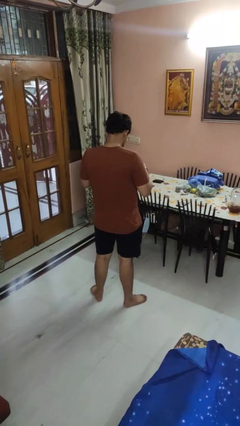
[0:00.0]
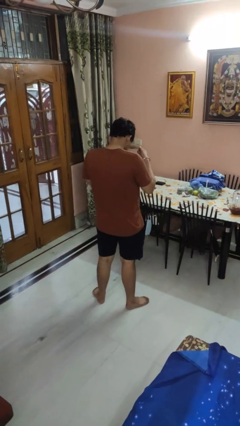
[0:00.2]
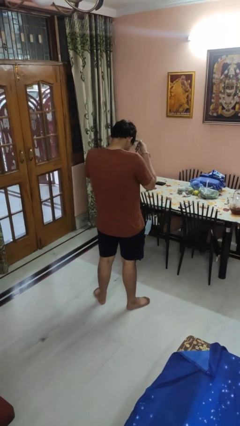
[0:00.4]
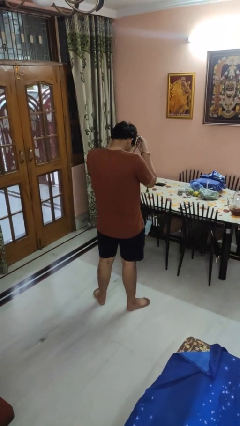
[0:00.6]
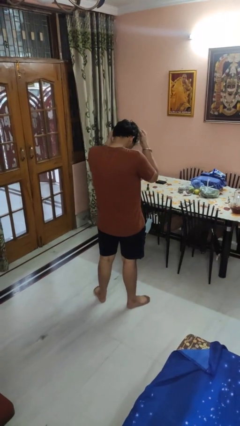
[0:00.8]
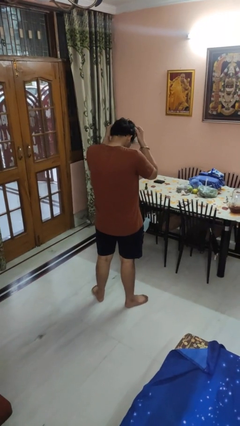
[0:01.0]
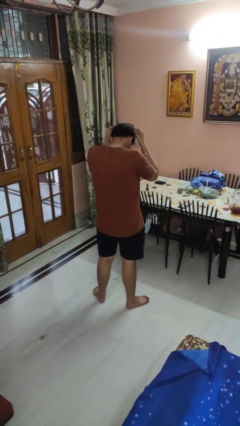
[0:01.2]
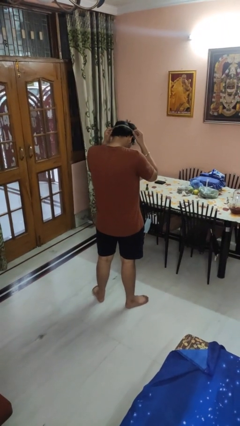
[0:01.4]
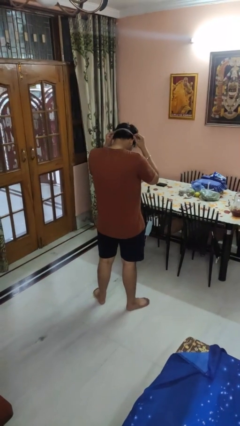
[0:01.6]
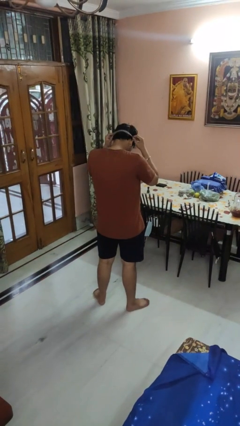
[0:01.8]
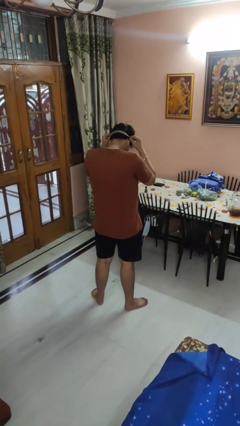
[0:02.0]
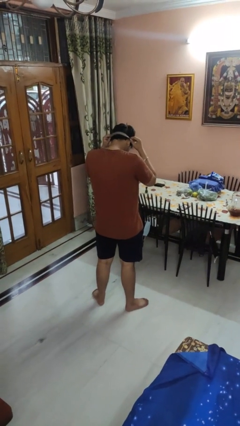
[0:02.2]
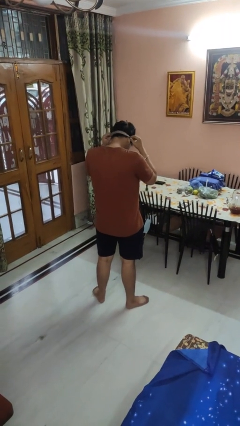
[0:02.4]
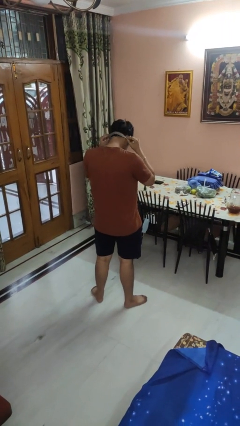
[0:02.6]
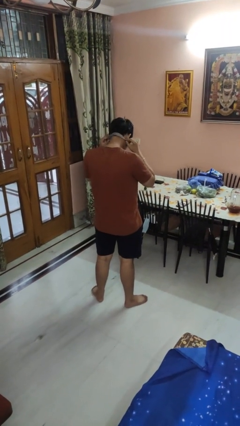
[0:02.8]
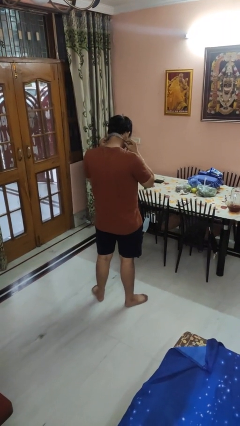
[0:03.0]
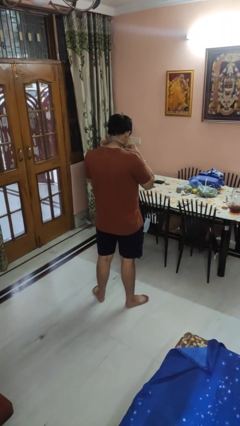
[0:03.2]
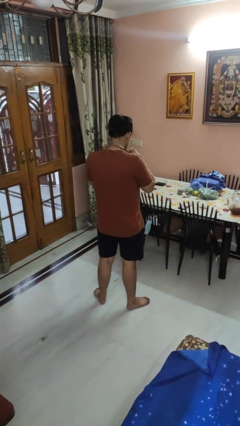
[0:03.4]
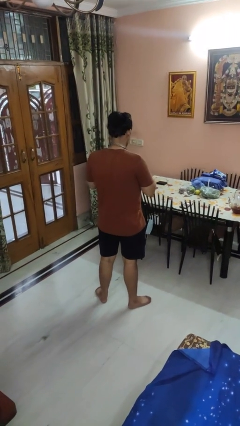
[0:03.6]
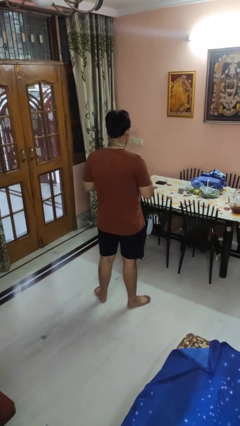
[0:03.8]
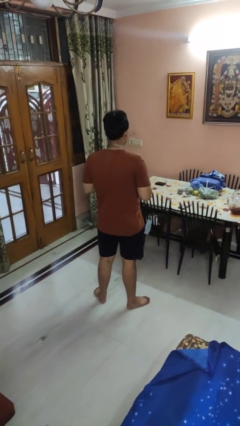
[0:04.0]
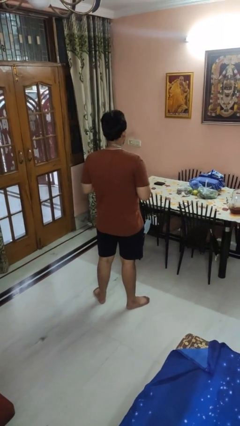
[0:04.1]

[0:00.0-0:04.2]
person puts on necktie

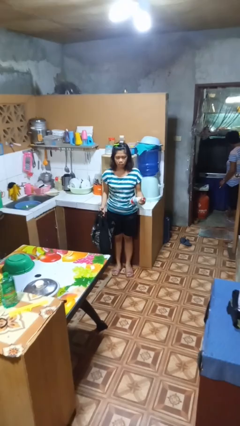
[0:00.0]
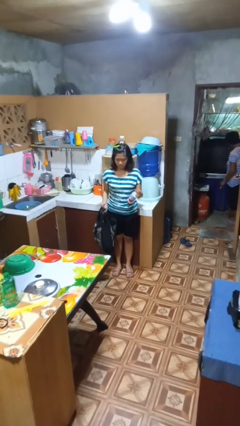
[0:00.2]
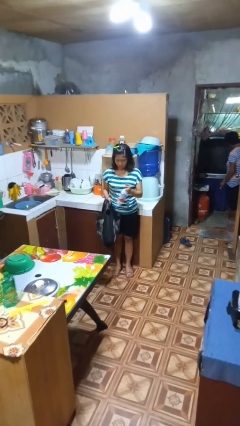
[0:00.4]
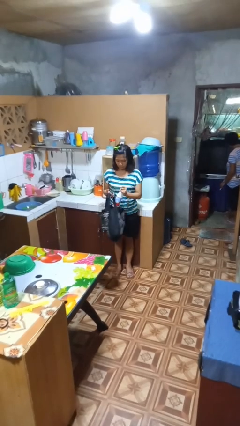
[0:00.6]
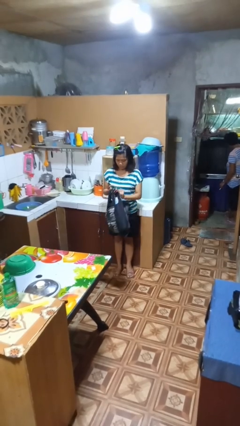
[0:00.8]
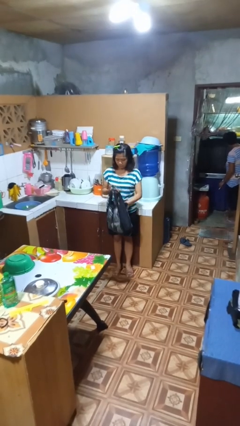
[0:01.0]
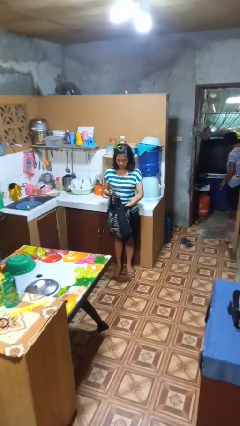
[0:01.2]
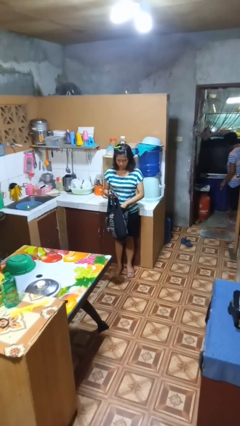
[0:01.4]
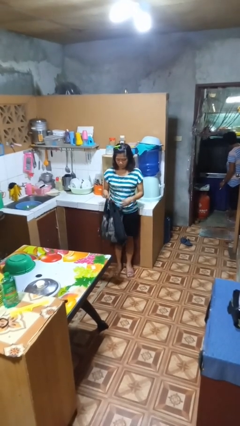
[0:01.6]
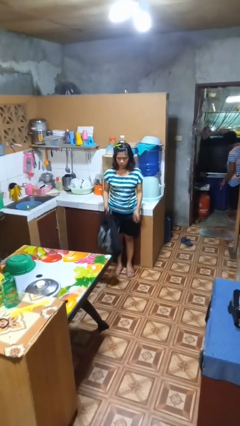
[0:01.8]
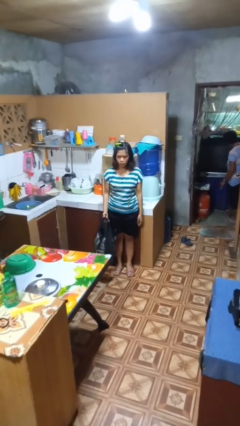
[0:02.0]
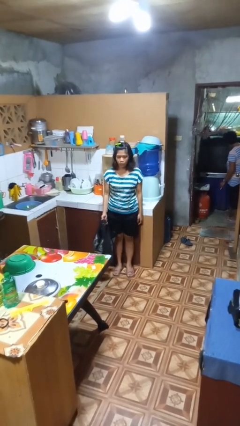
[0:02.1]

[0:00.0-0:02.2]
person puts object into bag

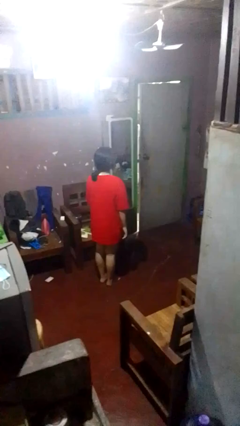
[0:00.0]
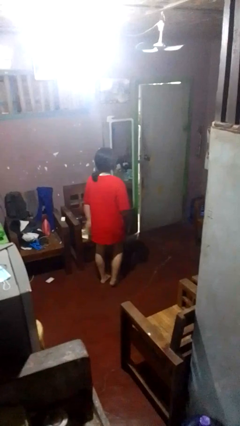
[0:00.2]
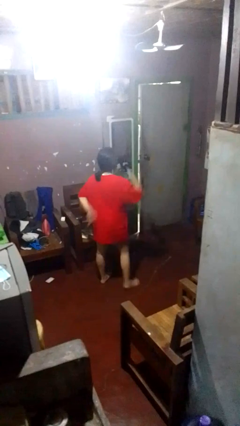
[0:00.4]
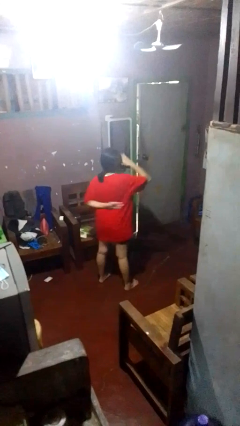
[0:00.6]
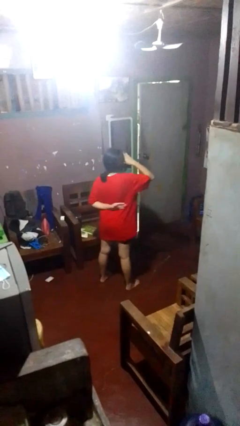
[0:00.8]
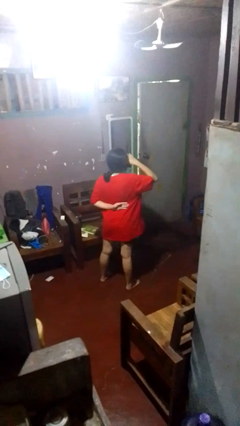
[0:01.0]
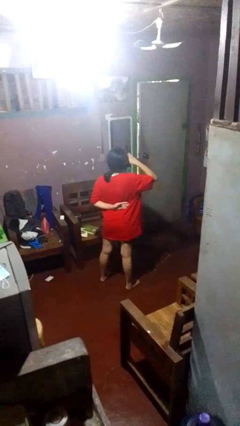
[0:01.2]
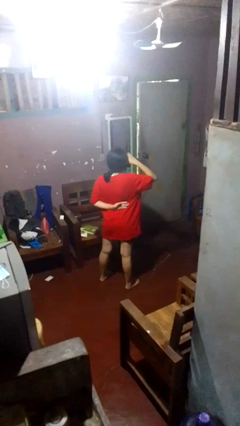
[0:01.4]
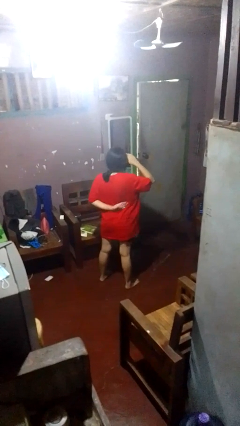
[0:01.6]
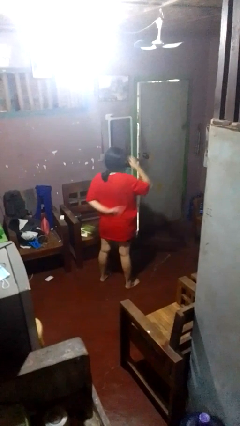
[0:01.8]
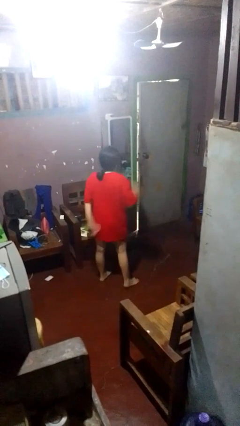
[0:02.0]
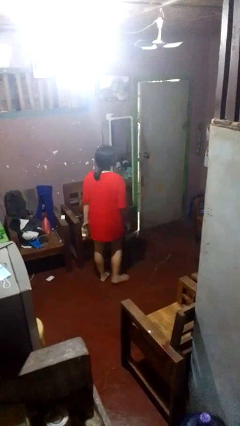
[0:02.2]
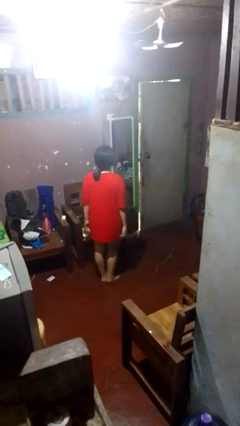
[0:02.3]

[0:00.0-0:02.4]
person salutes

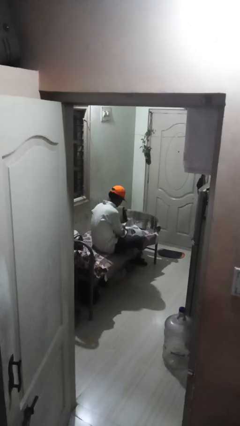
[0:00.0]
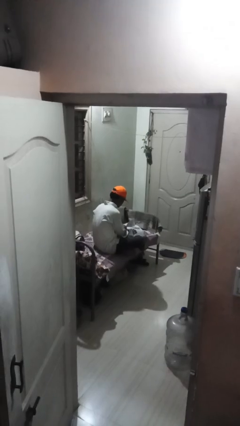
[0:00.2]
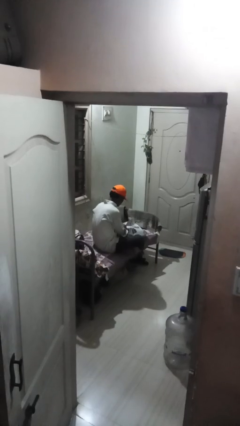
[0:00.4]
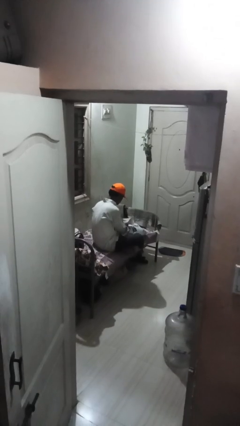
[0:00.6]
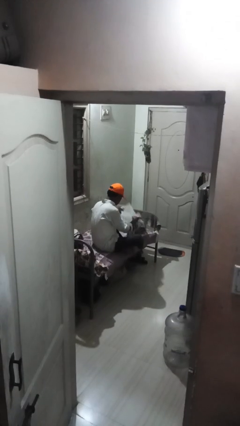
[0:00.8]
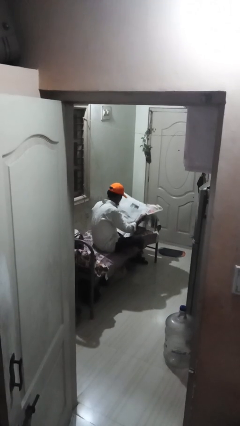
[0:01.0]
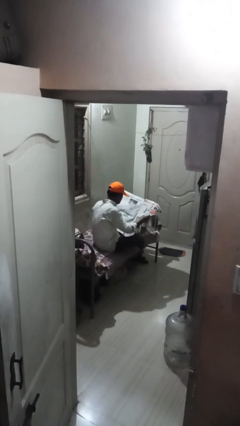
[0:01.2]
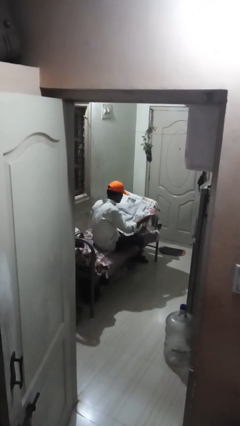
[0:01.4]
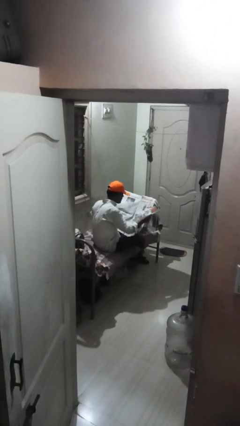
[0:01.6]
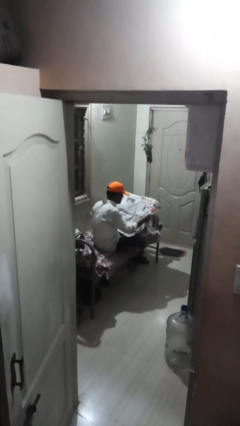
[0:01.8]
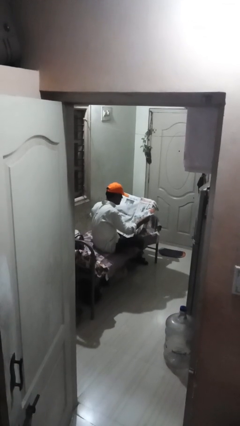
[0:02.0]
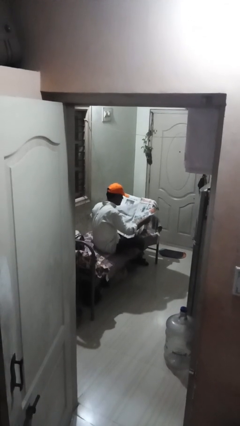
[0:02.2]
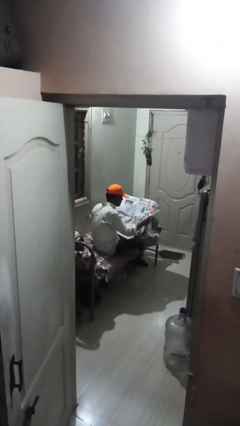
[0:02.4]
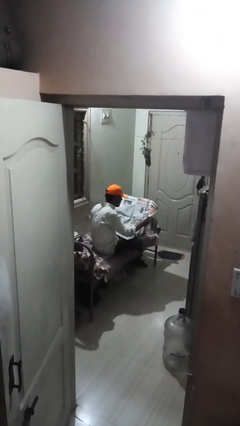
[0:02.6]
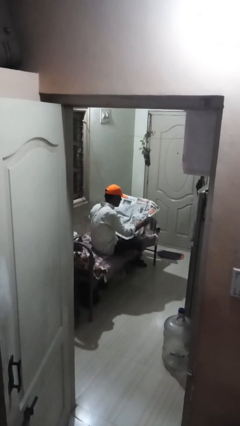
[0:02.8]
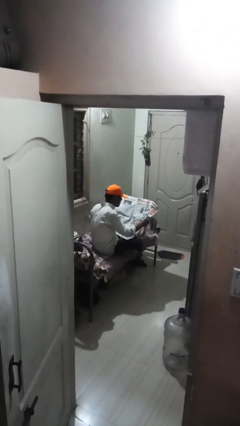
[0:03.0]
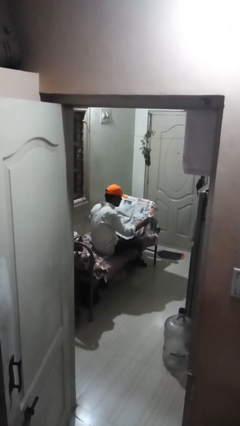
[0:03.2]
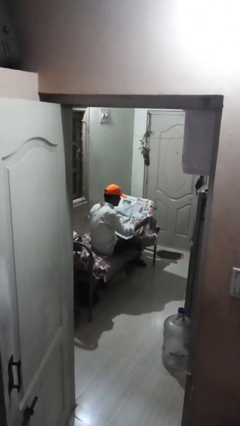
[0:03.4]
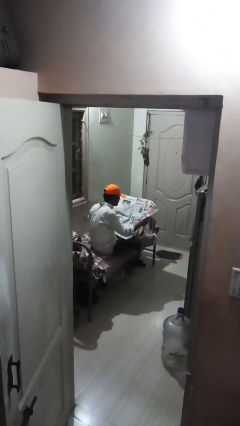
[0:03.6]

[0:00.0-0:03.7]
person reads newspaper

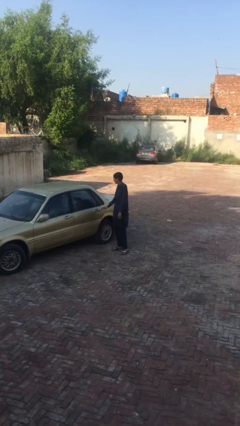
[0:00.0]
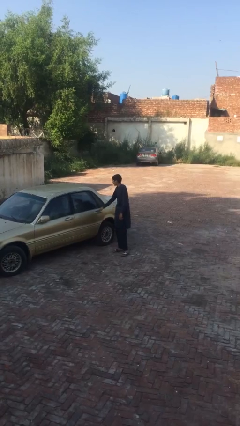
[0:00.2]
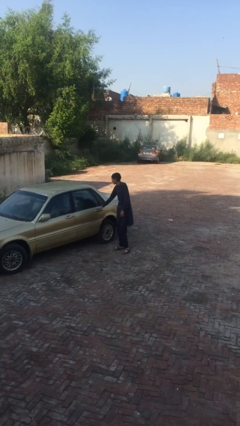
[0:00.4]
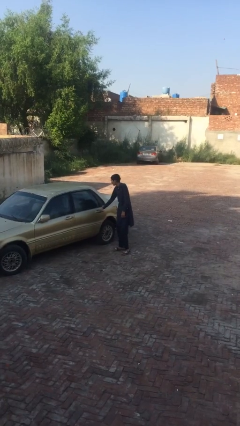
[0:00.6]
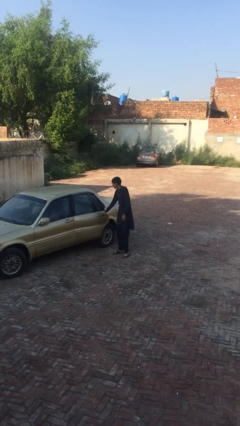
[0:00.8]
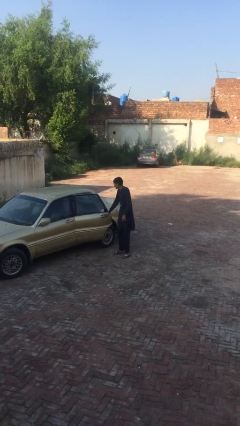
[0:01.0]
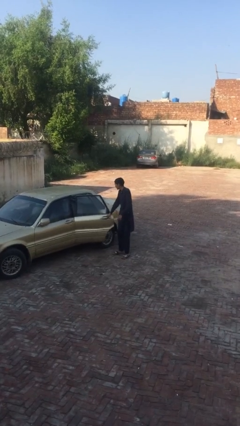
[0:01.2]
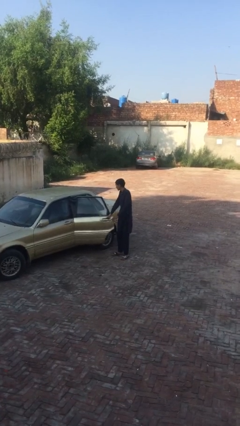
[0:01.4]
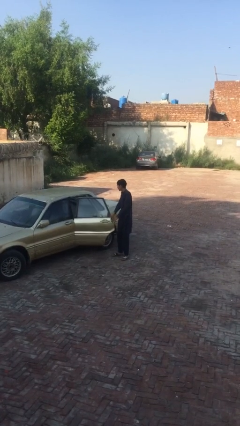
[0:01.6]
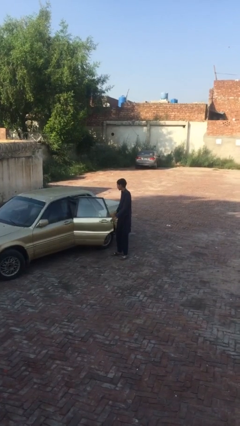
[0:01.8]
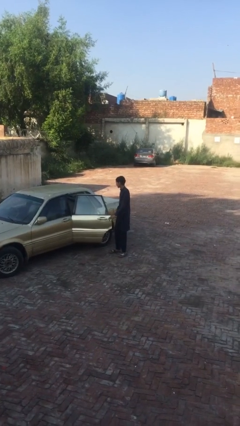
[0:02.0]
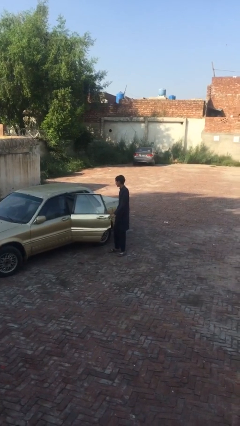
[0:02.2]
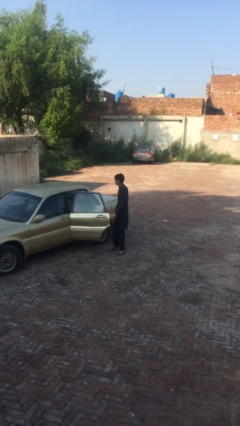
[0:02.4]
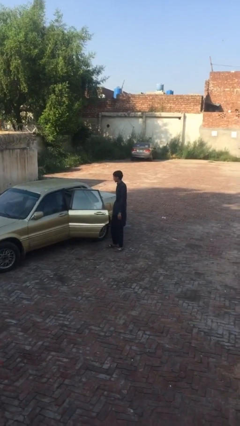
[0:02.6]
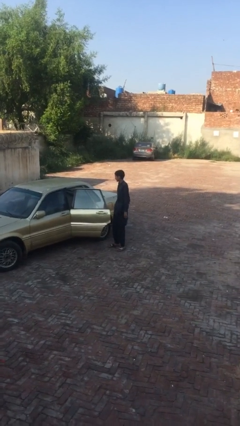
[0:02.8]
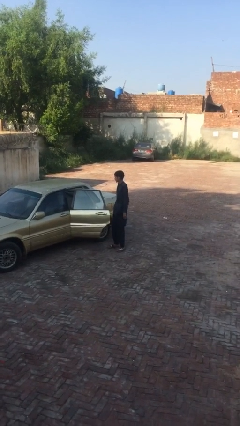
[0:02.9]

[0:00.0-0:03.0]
person opens car door

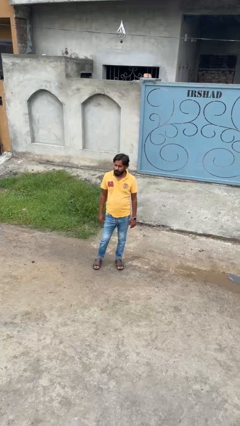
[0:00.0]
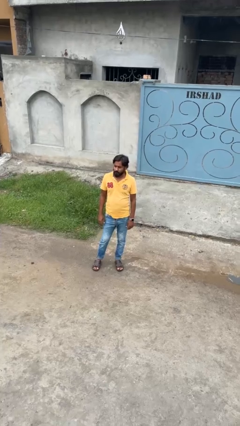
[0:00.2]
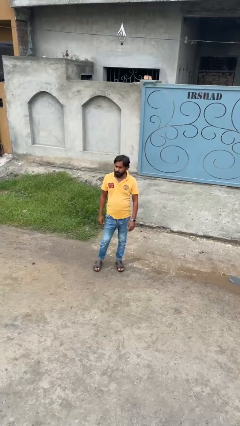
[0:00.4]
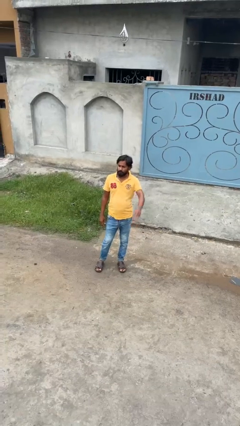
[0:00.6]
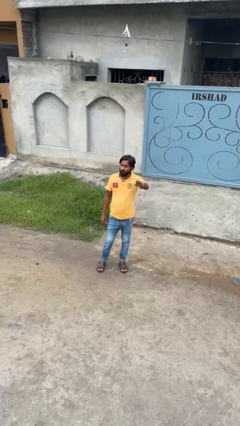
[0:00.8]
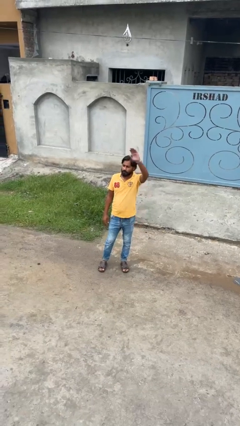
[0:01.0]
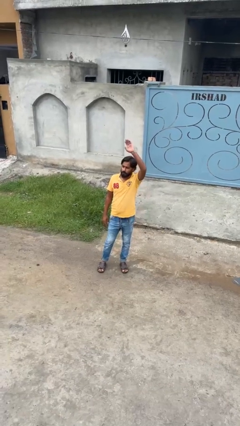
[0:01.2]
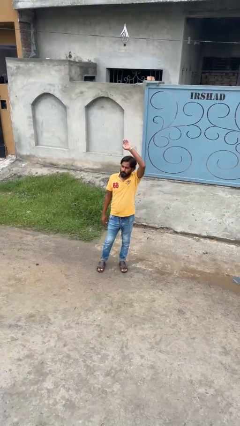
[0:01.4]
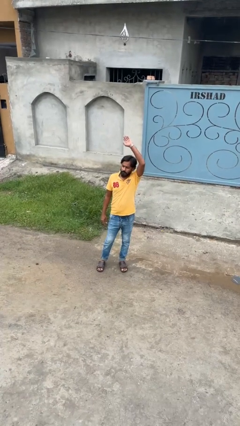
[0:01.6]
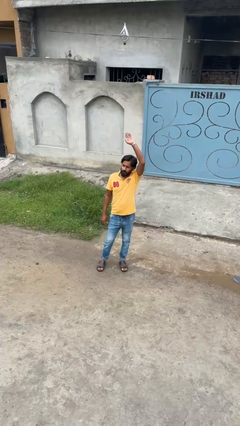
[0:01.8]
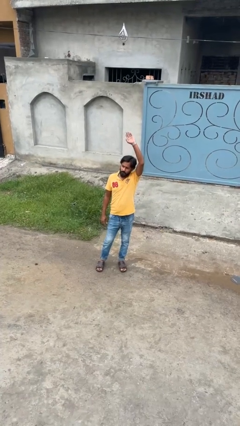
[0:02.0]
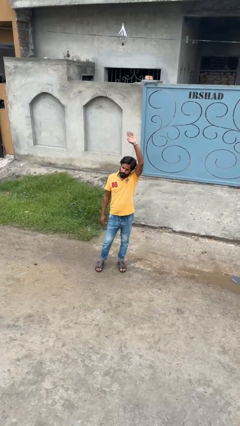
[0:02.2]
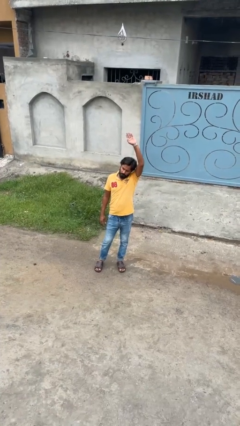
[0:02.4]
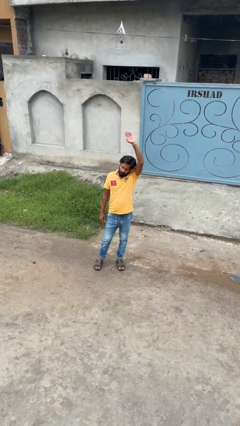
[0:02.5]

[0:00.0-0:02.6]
person gestures raise hand
